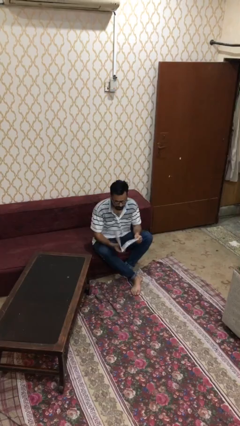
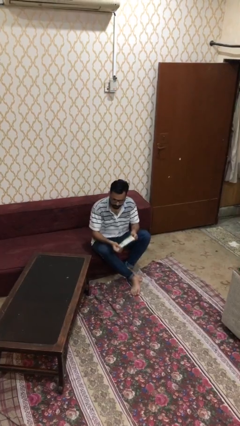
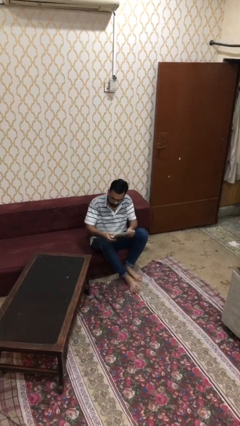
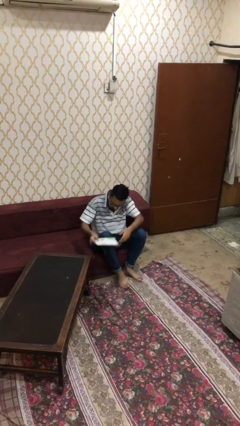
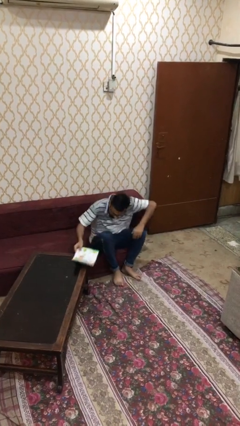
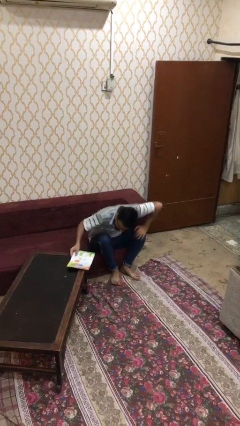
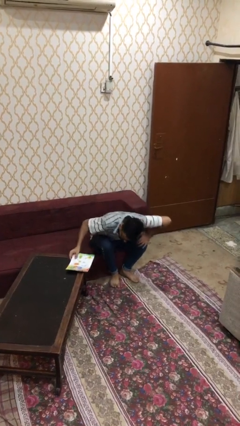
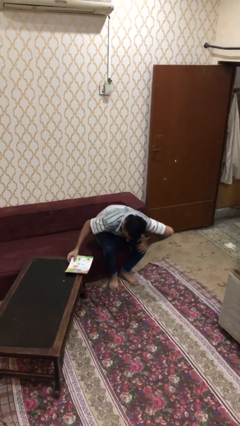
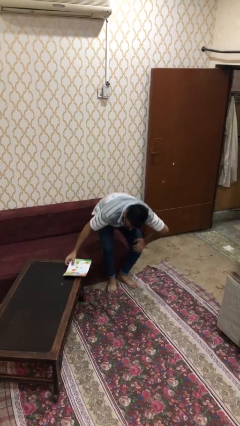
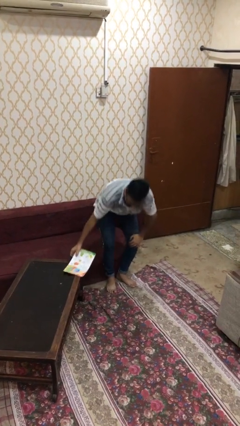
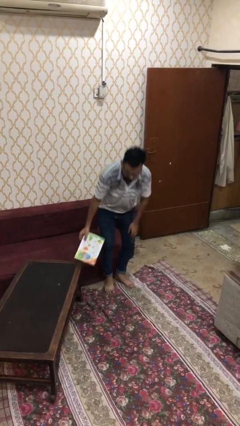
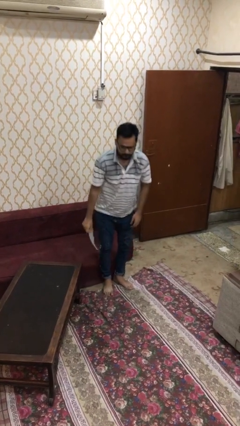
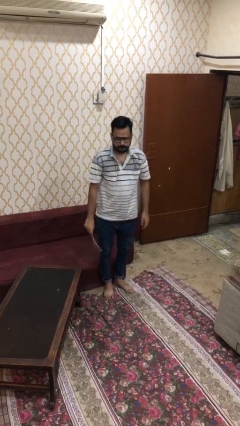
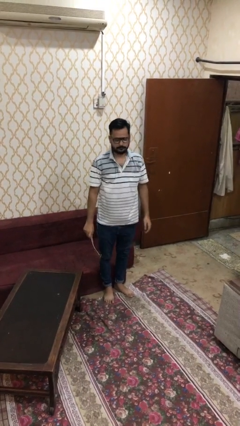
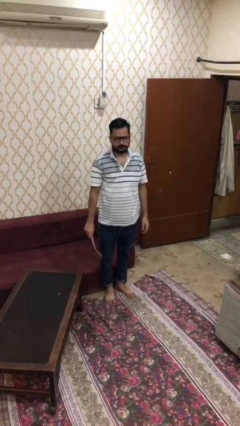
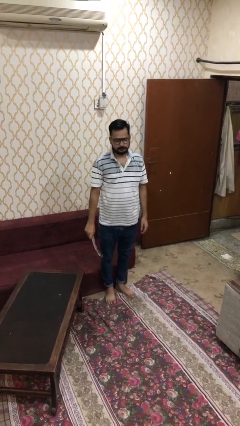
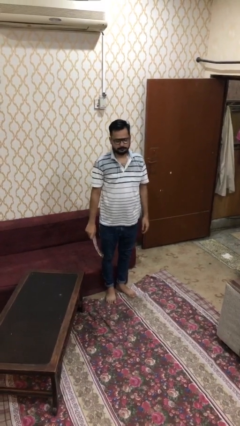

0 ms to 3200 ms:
person stands up

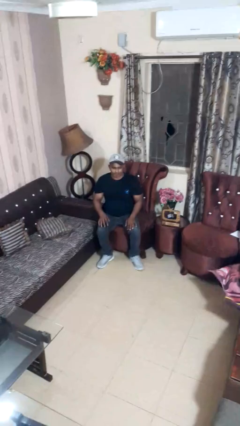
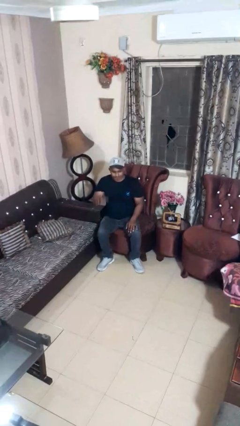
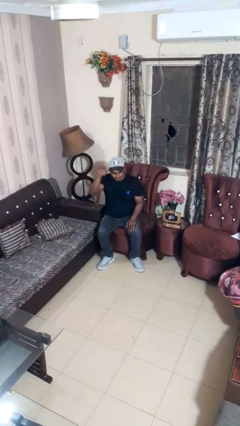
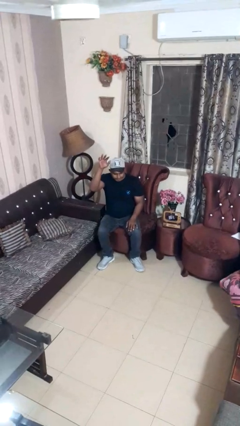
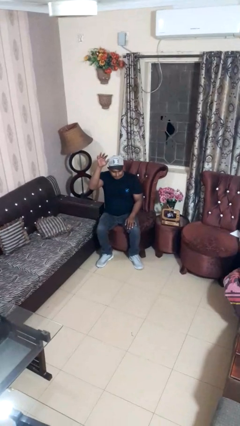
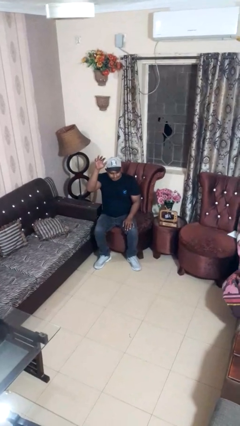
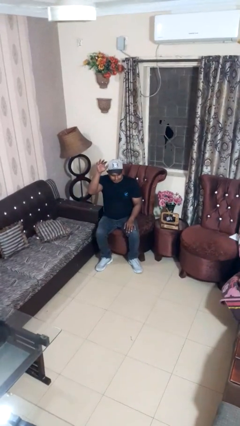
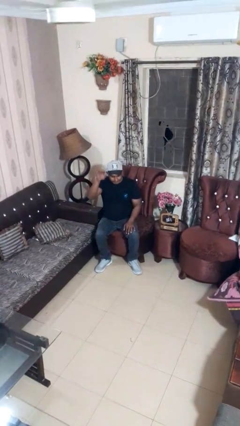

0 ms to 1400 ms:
person gestures raise hand

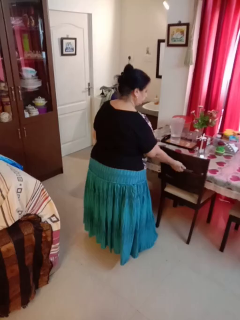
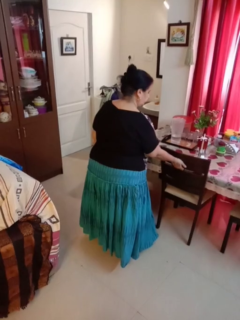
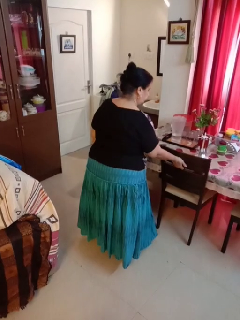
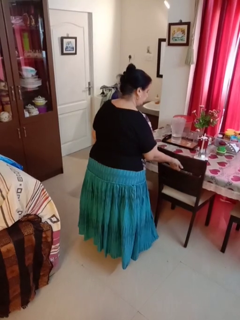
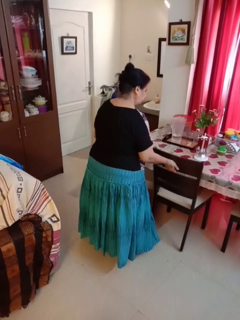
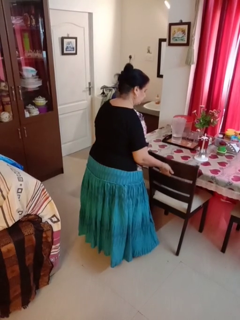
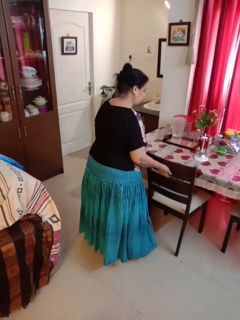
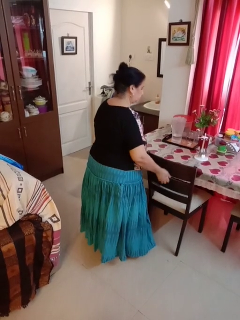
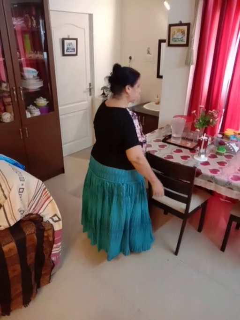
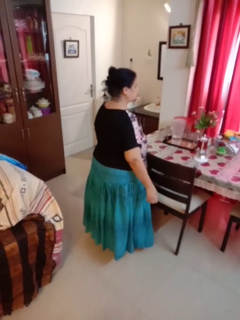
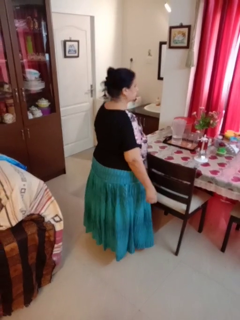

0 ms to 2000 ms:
person pulls out chair

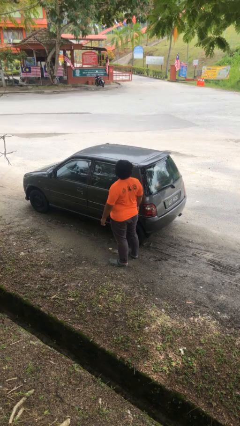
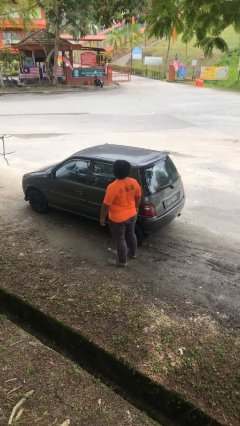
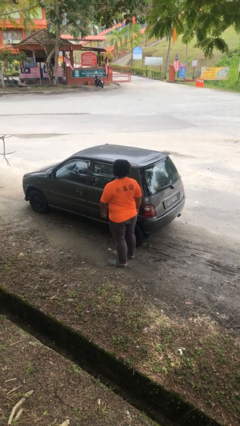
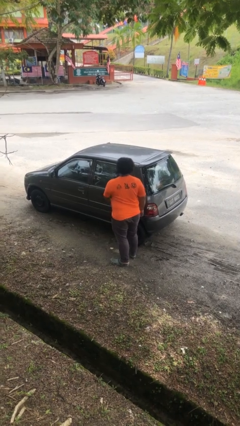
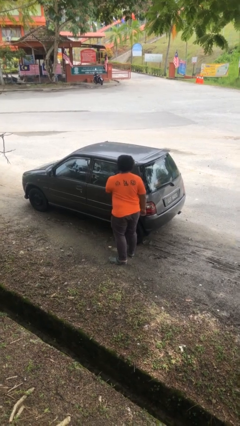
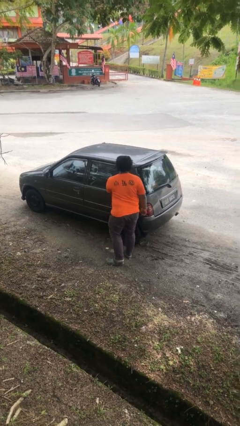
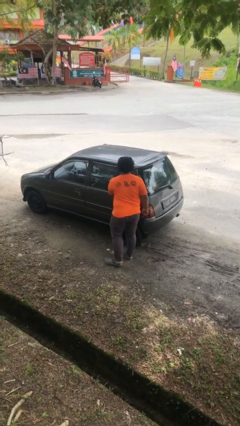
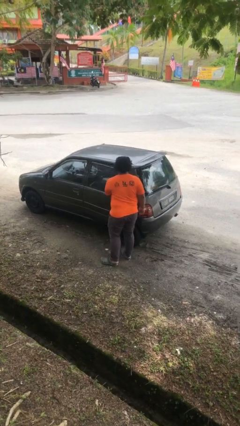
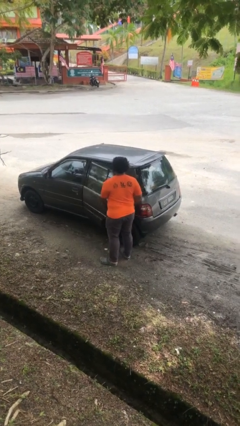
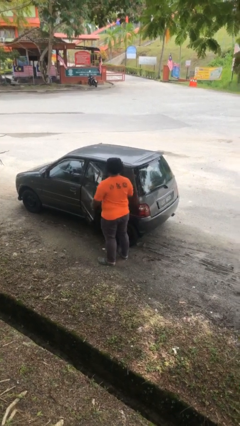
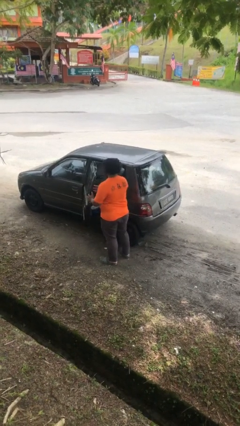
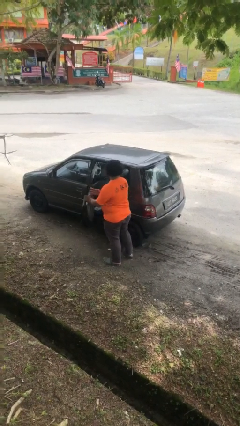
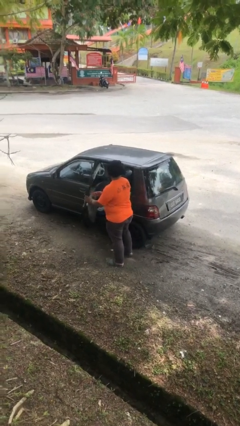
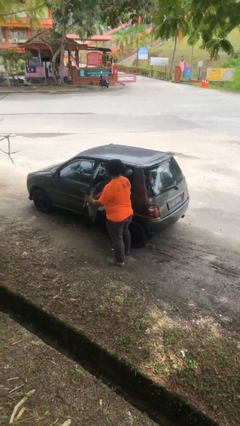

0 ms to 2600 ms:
person opens car door

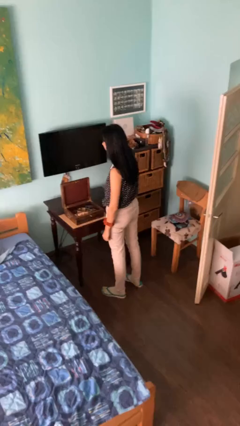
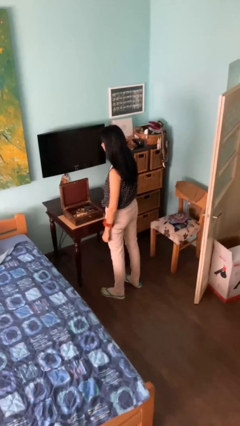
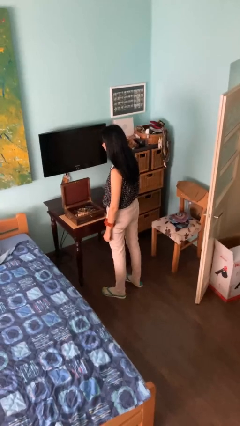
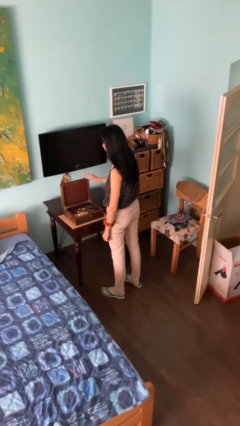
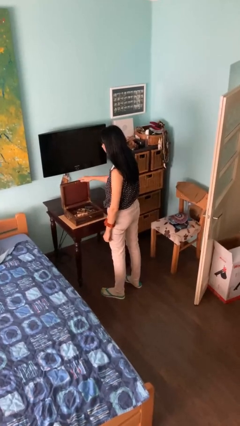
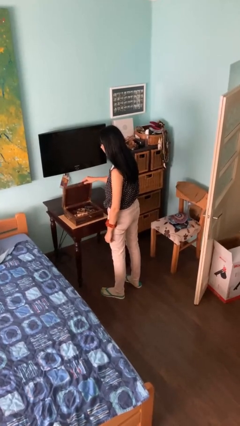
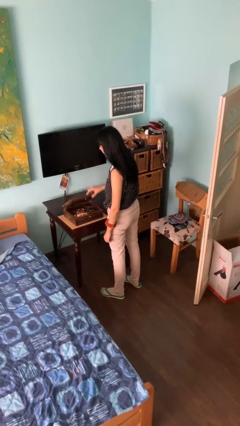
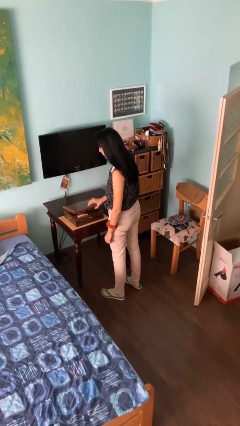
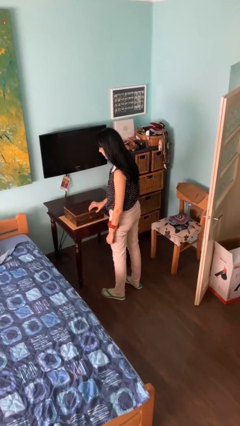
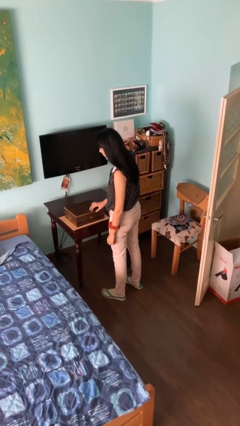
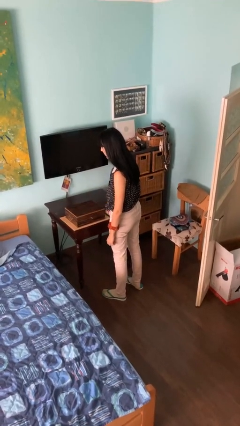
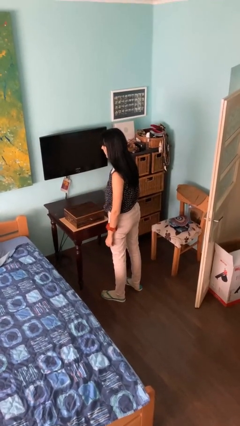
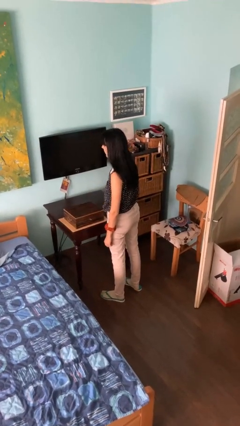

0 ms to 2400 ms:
person closes jewelry box

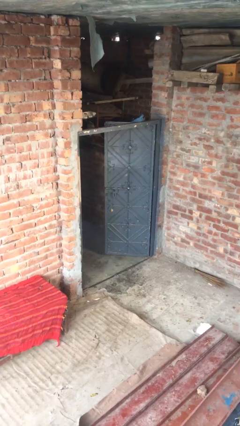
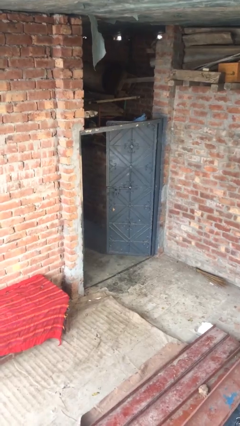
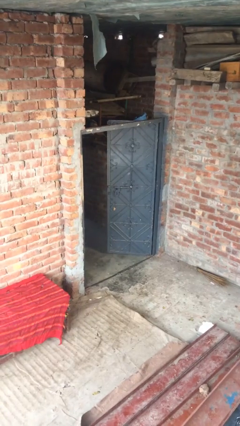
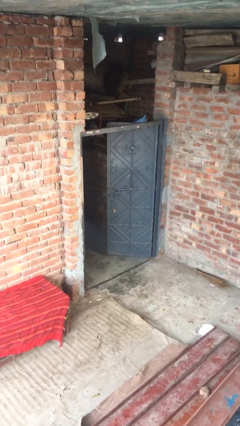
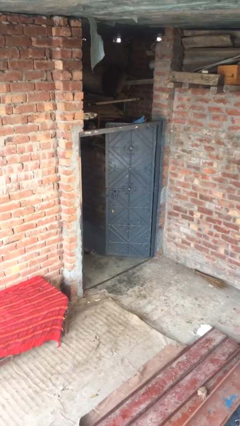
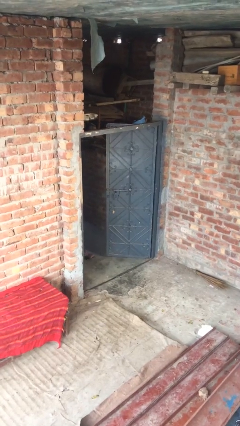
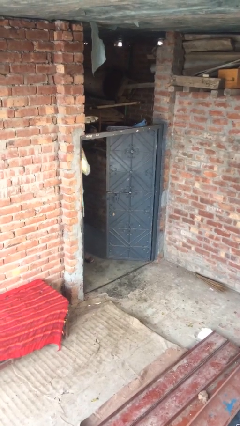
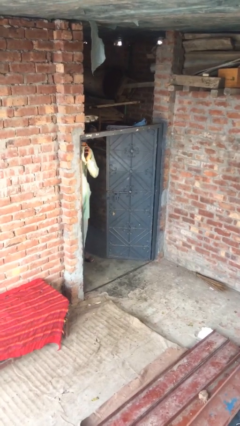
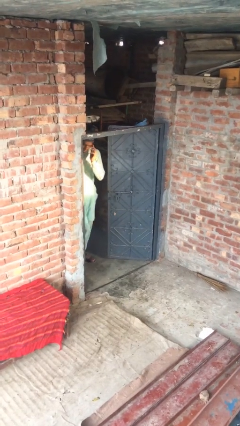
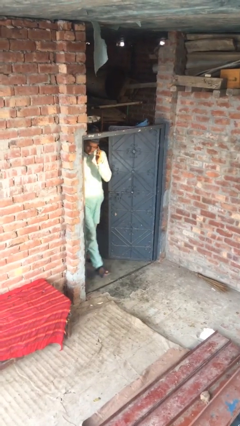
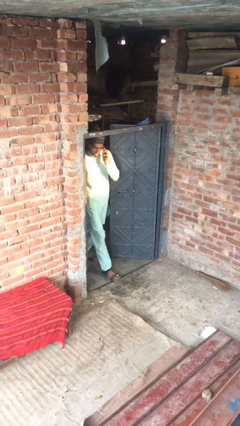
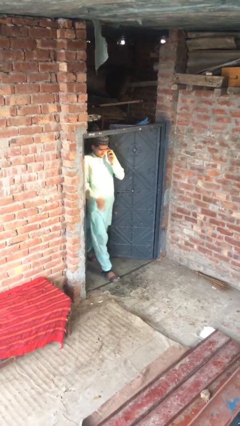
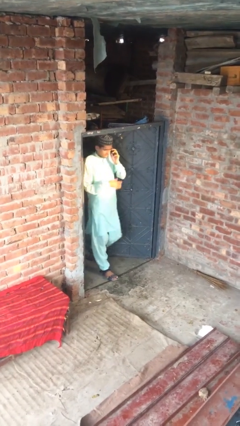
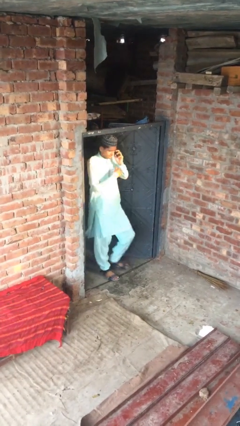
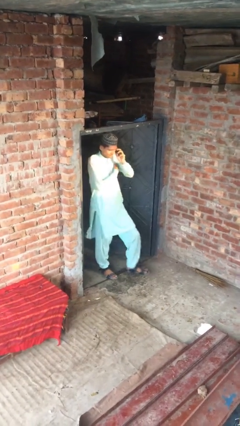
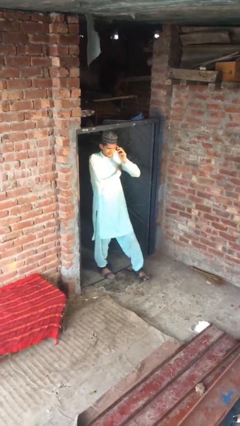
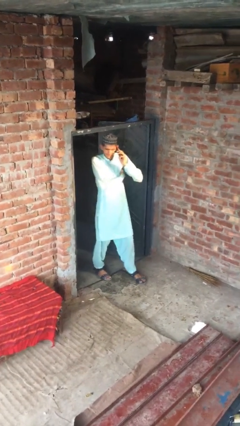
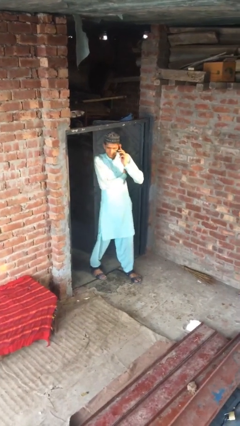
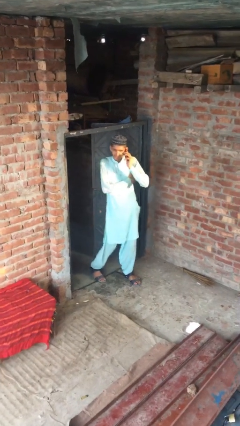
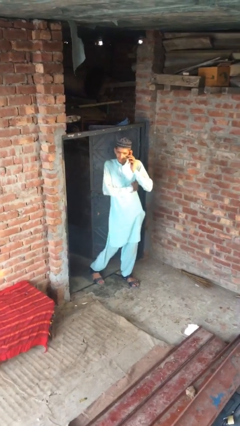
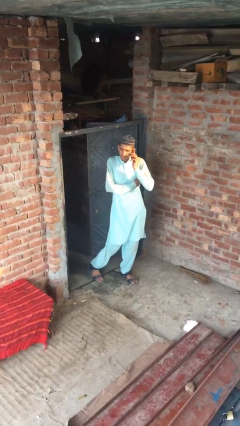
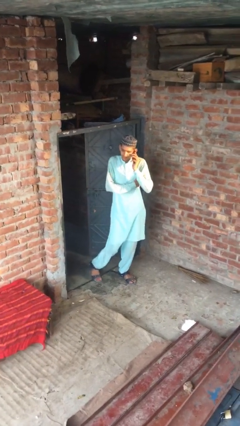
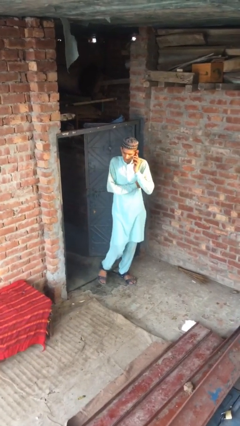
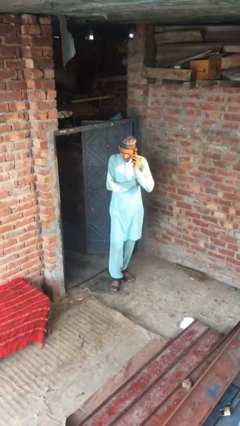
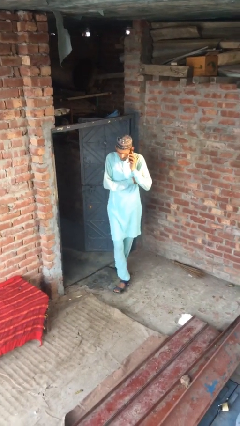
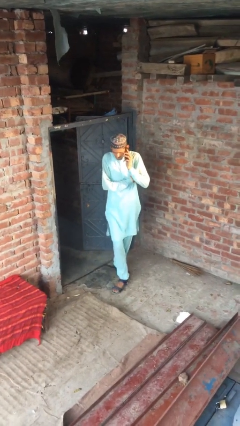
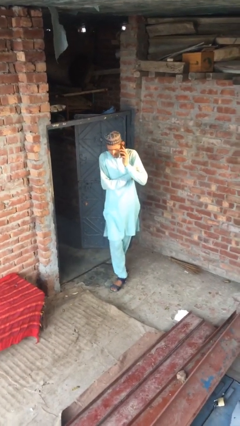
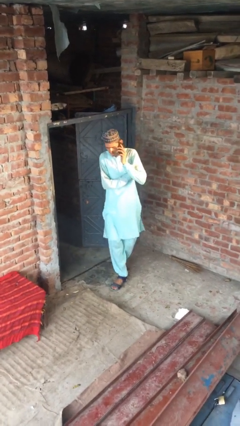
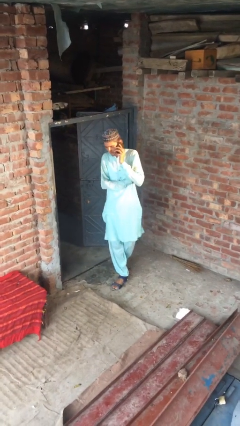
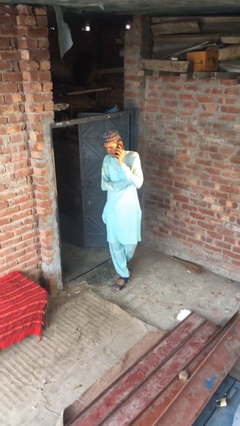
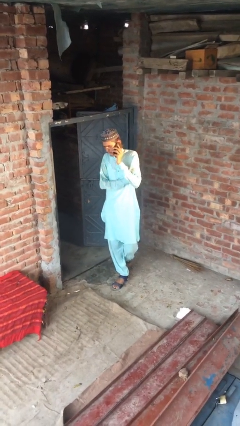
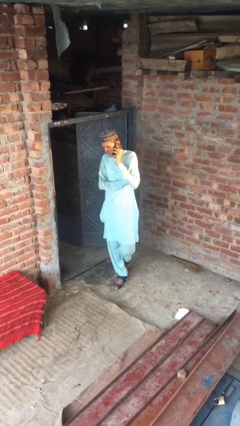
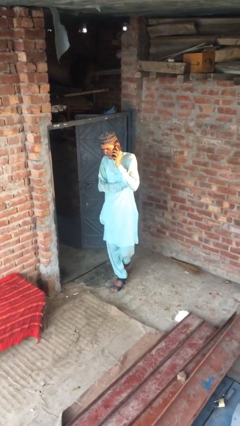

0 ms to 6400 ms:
person enters scene through structure
